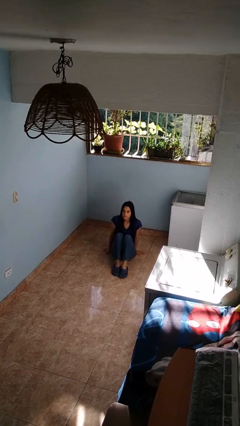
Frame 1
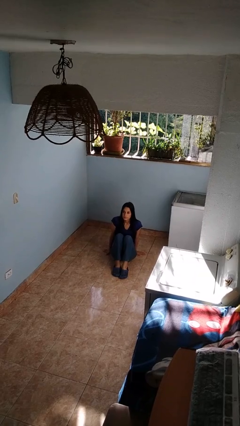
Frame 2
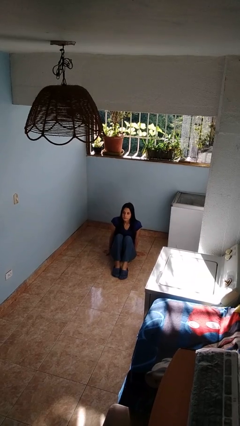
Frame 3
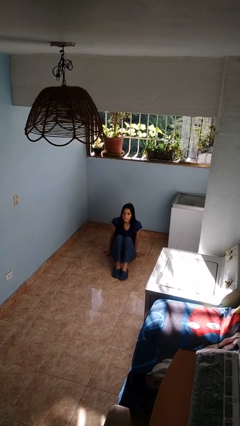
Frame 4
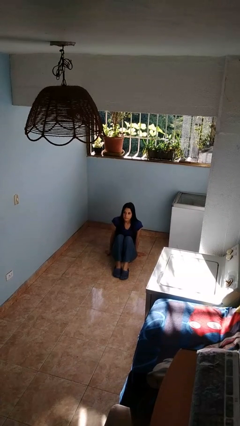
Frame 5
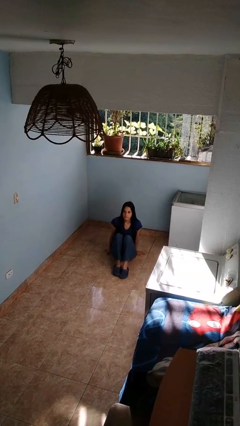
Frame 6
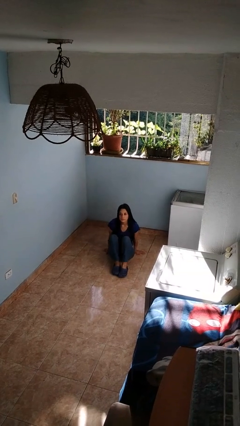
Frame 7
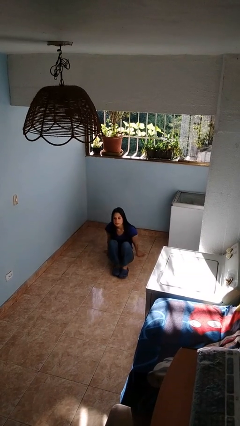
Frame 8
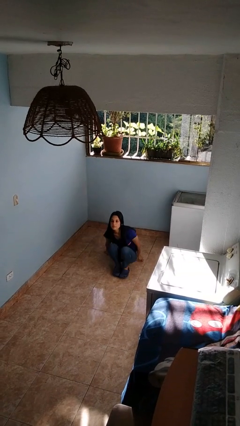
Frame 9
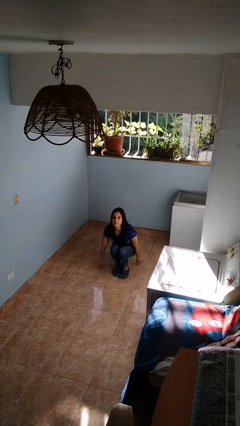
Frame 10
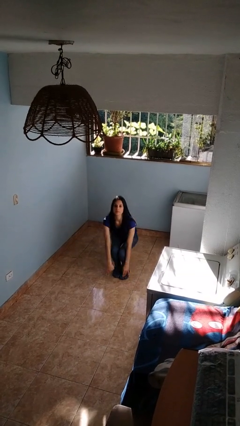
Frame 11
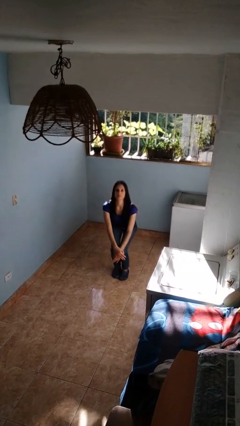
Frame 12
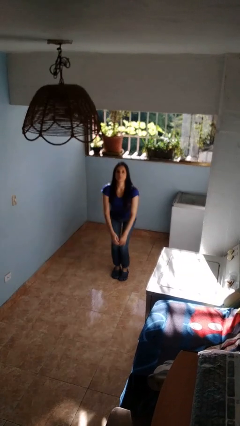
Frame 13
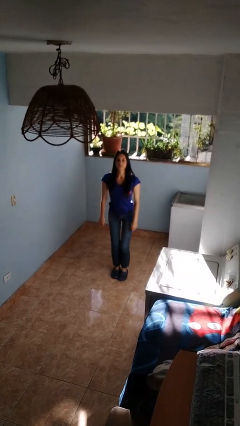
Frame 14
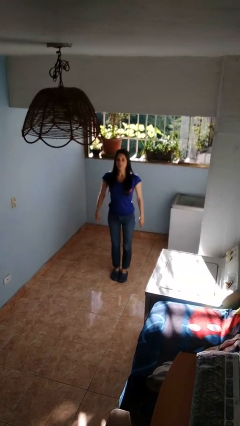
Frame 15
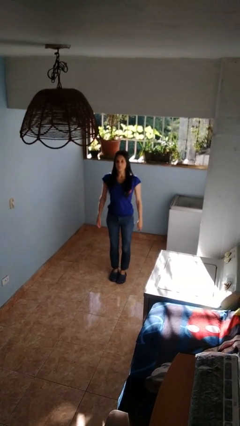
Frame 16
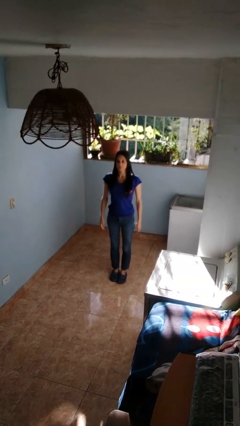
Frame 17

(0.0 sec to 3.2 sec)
person stands up from floor

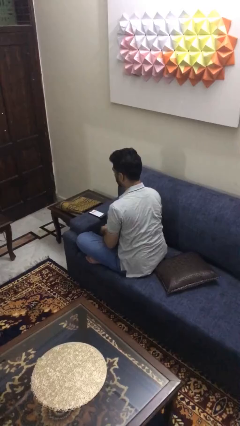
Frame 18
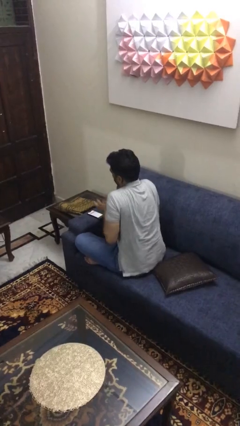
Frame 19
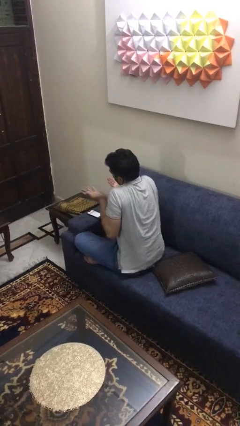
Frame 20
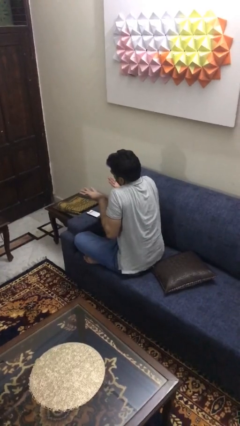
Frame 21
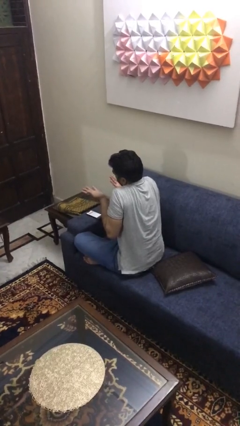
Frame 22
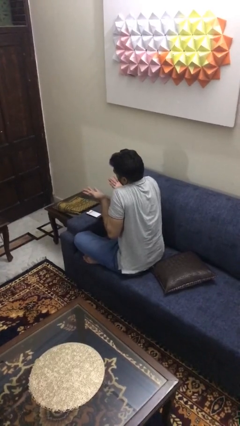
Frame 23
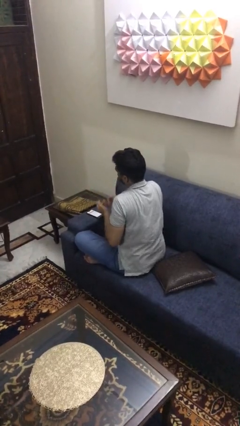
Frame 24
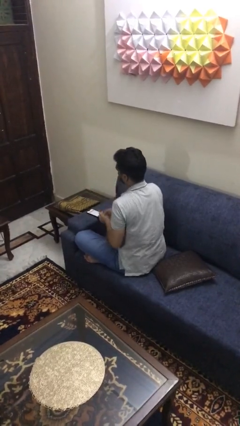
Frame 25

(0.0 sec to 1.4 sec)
person shrugs

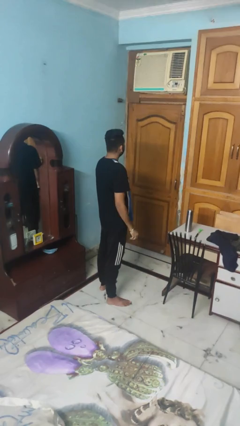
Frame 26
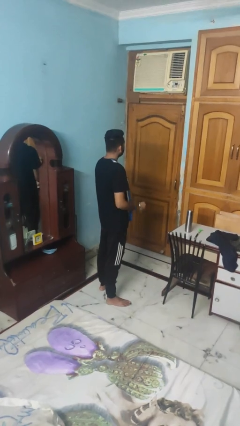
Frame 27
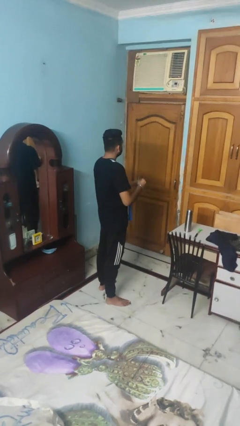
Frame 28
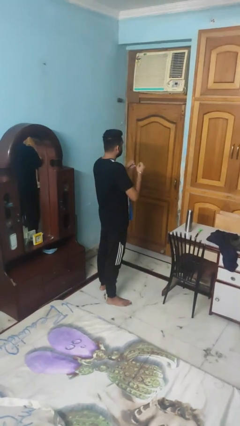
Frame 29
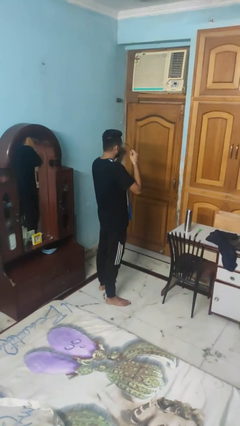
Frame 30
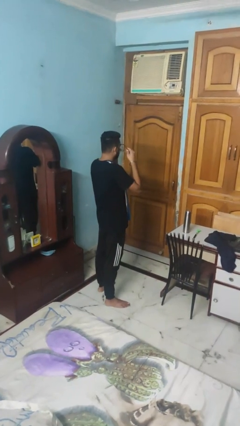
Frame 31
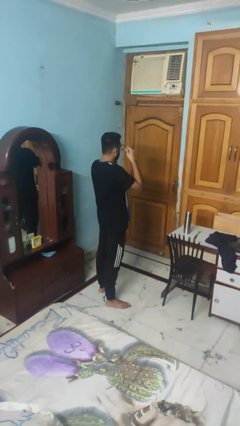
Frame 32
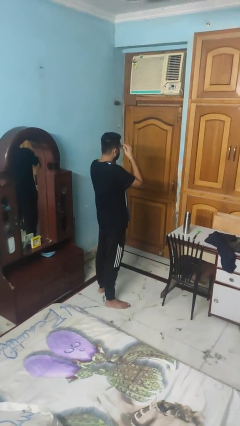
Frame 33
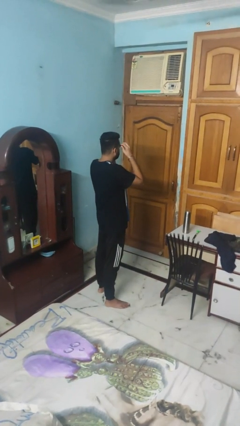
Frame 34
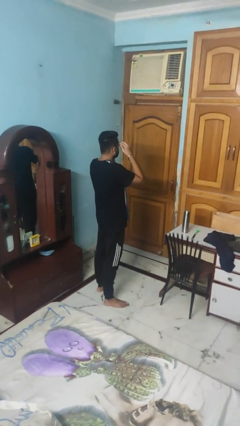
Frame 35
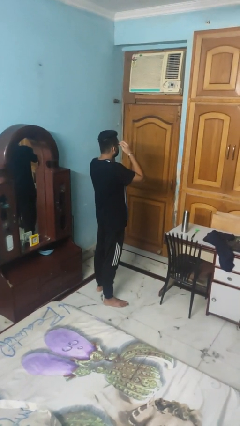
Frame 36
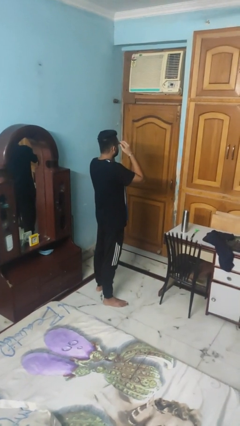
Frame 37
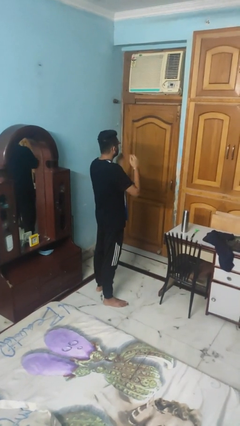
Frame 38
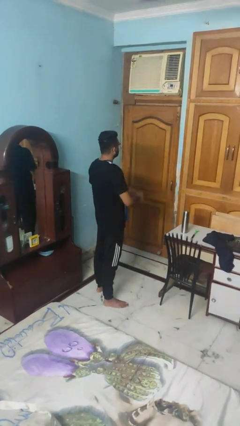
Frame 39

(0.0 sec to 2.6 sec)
person puts on glasses

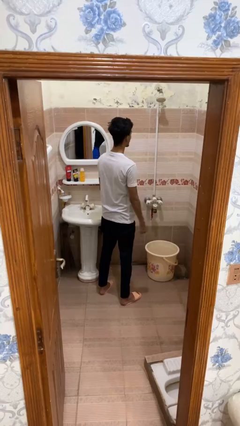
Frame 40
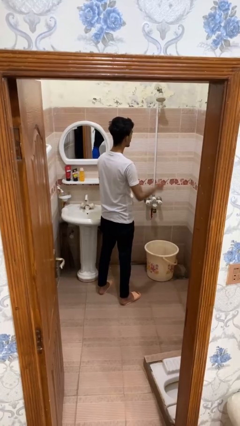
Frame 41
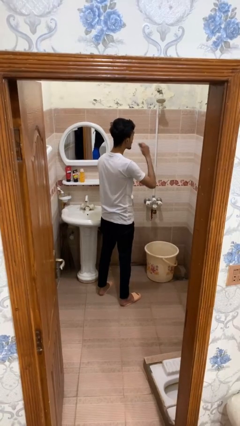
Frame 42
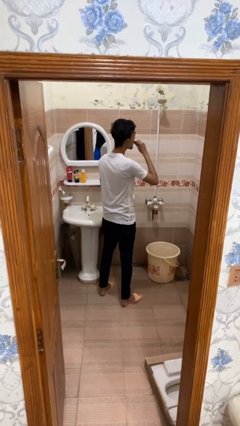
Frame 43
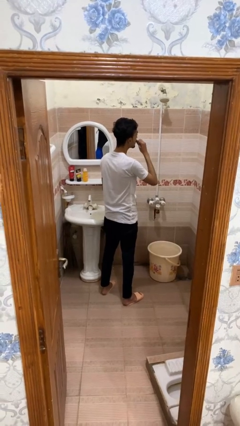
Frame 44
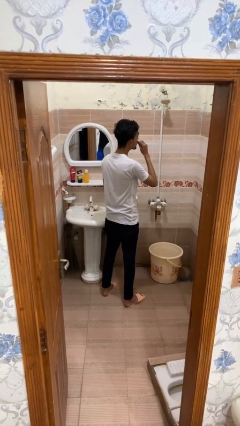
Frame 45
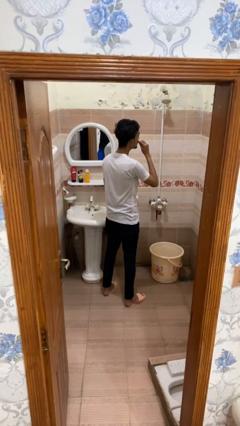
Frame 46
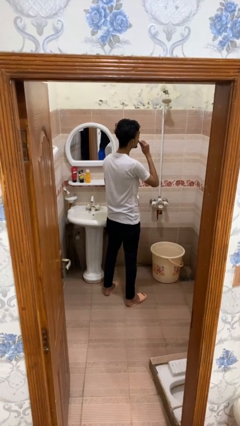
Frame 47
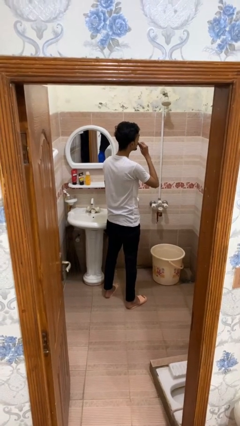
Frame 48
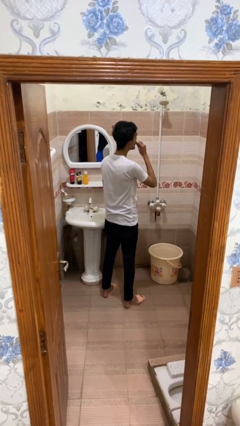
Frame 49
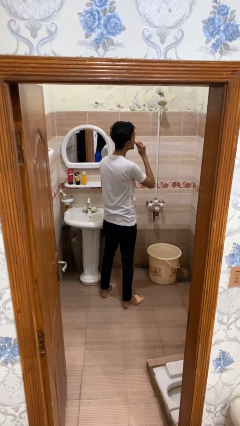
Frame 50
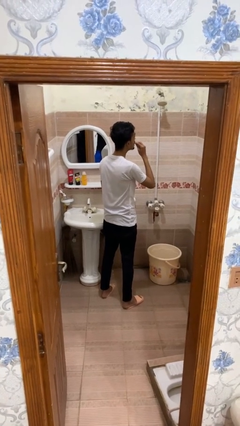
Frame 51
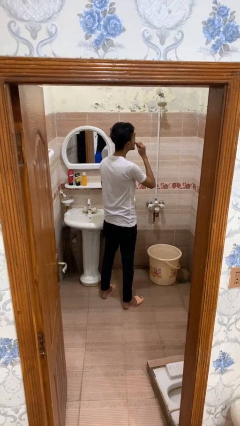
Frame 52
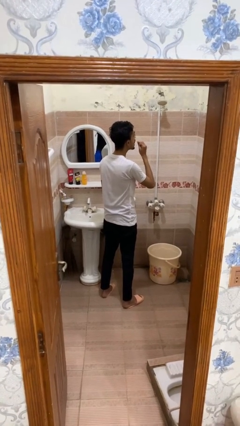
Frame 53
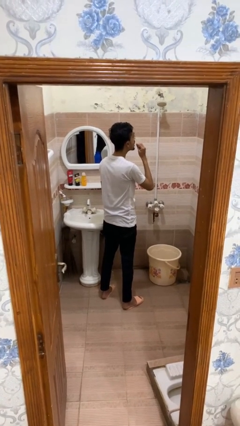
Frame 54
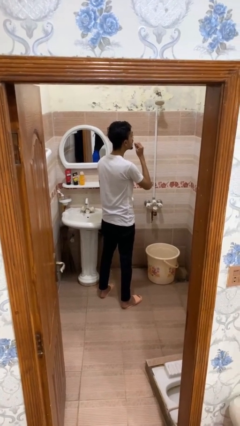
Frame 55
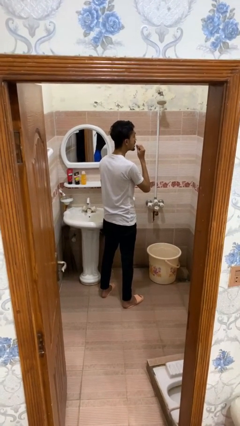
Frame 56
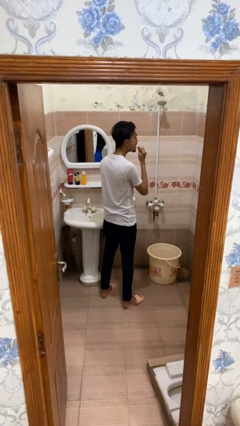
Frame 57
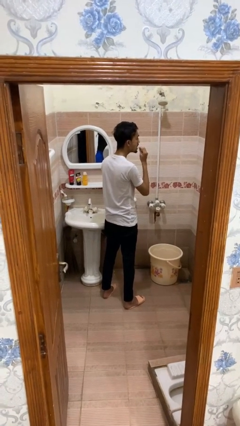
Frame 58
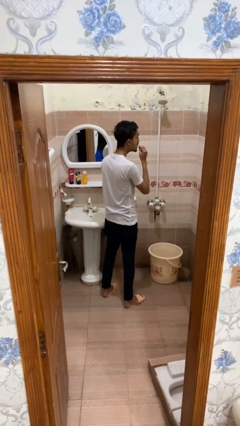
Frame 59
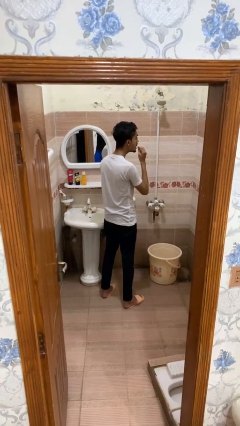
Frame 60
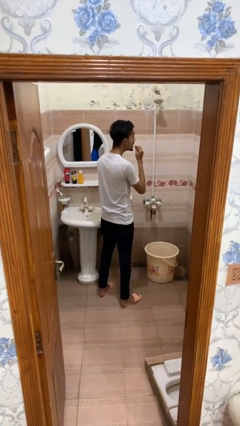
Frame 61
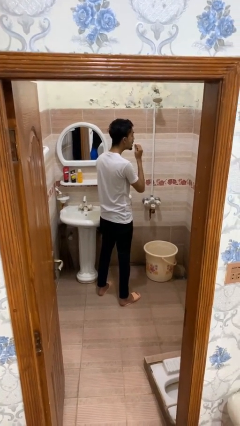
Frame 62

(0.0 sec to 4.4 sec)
person flosses

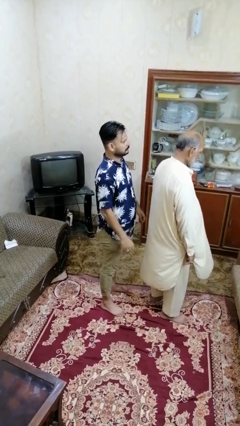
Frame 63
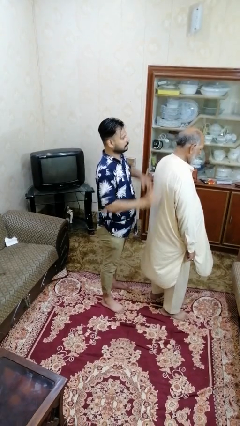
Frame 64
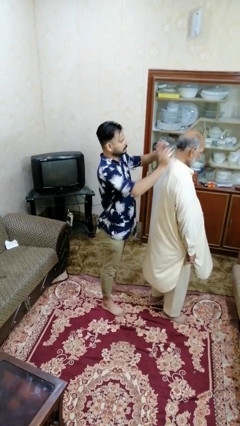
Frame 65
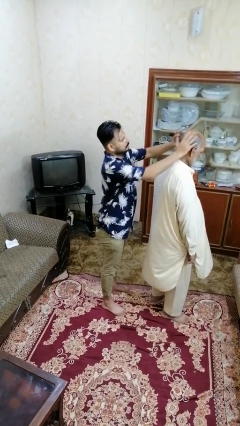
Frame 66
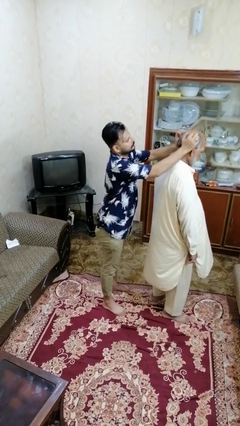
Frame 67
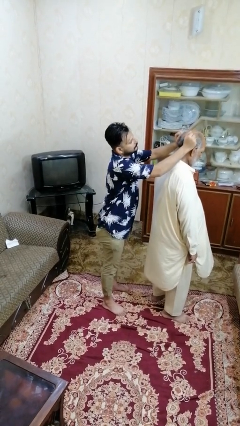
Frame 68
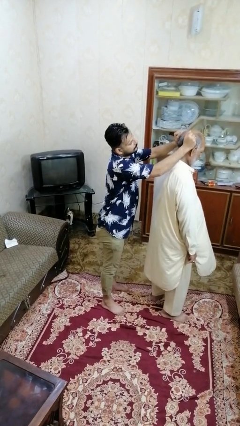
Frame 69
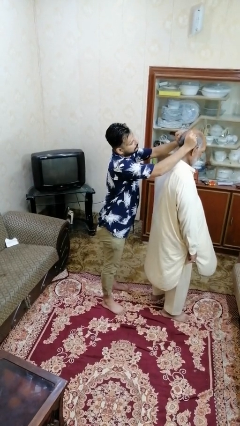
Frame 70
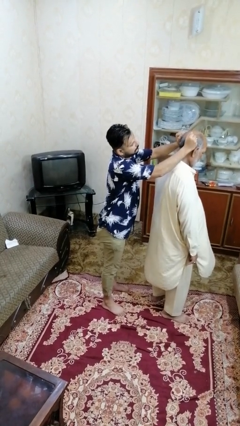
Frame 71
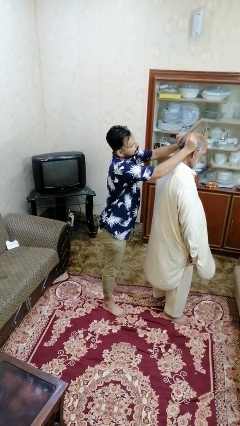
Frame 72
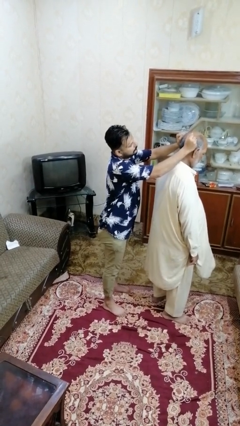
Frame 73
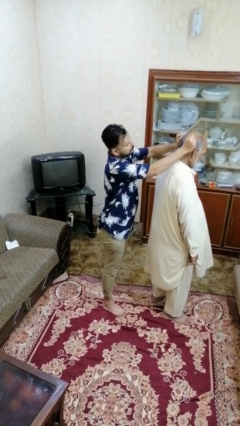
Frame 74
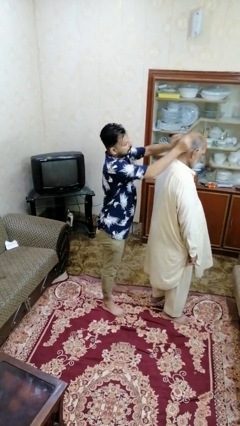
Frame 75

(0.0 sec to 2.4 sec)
person grabs person by hair

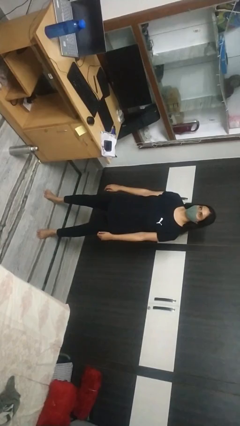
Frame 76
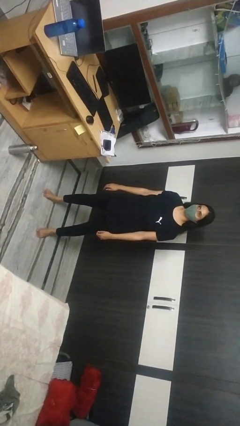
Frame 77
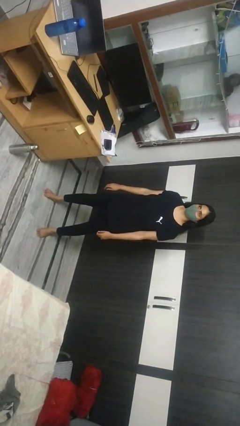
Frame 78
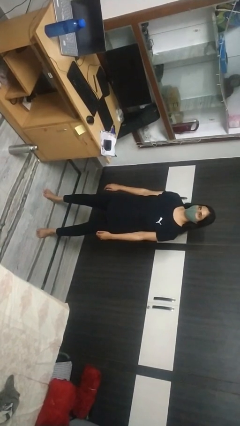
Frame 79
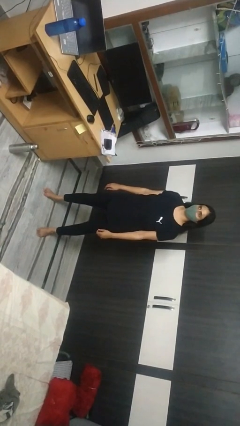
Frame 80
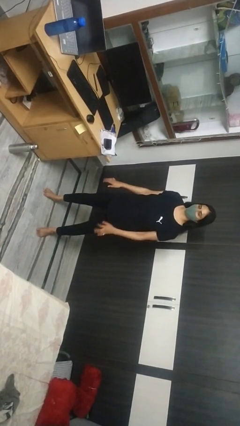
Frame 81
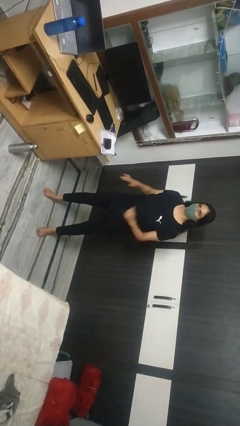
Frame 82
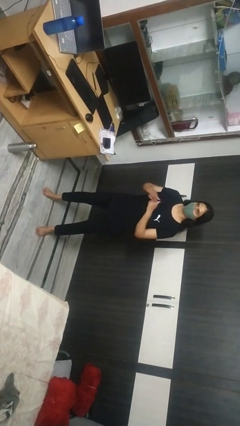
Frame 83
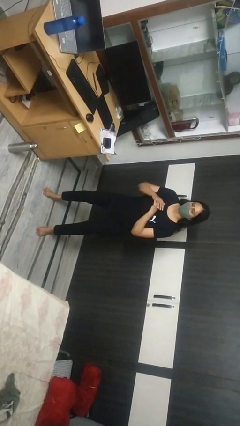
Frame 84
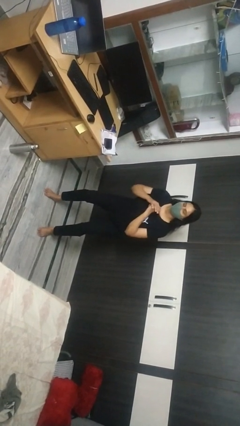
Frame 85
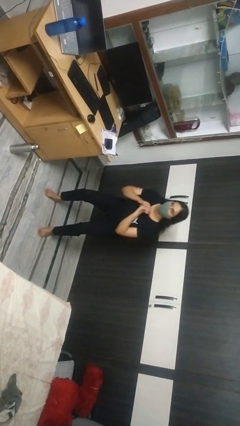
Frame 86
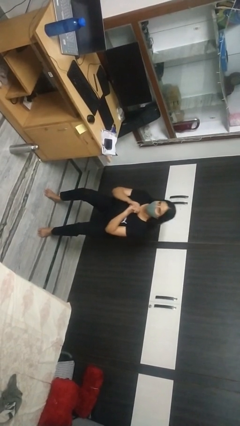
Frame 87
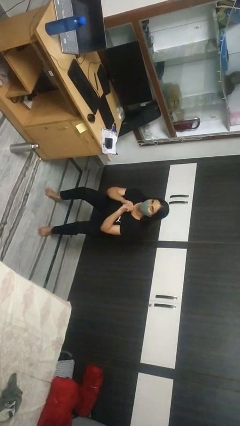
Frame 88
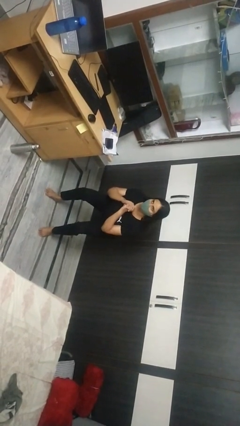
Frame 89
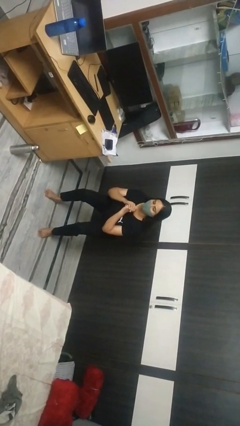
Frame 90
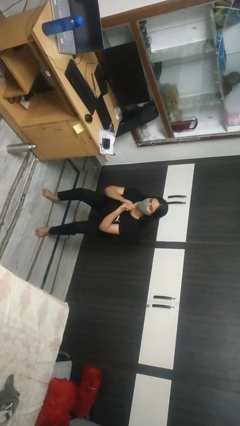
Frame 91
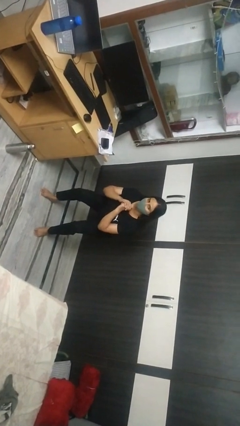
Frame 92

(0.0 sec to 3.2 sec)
person squats
